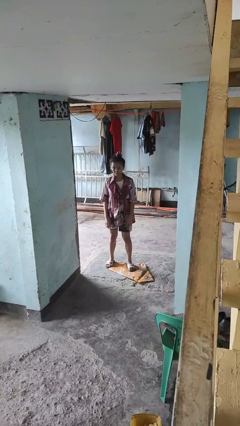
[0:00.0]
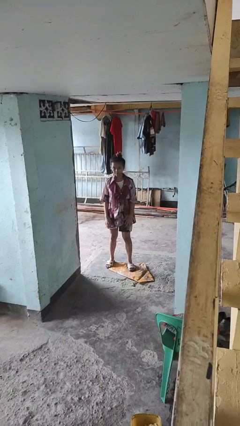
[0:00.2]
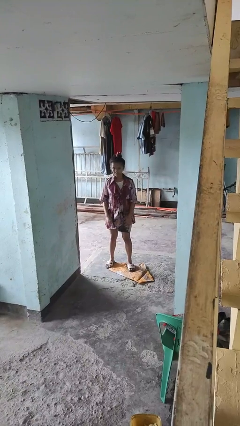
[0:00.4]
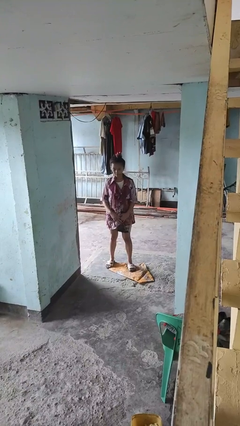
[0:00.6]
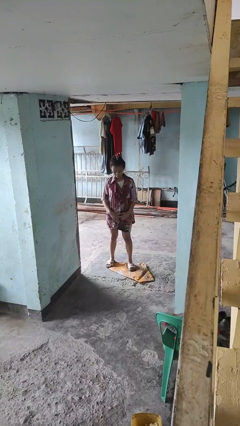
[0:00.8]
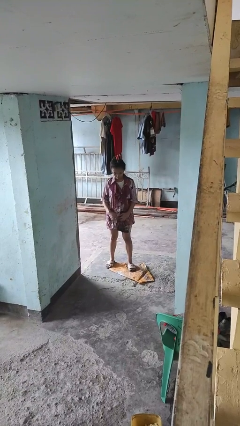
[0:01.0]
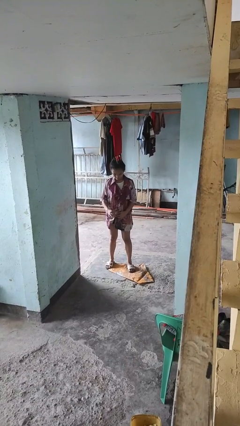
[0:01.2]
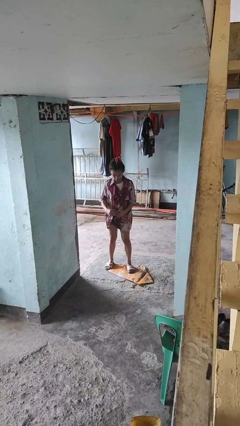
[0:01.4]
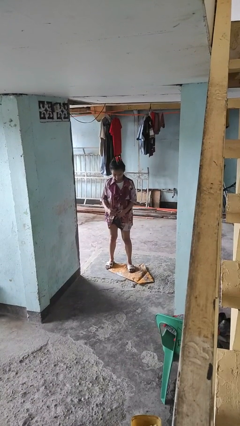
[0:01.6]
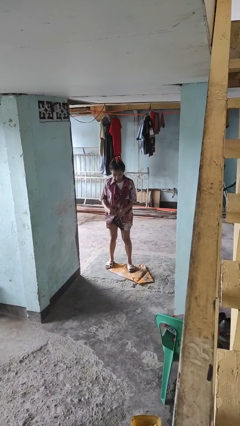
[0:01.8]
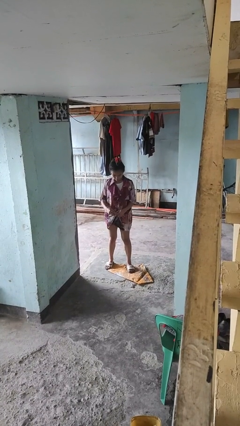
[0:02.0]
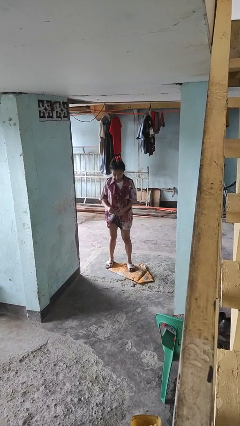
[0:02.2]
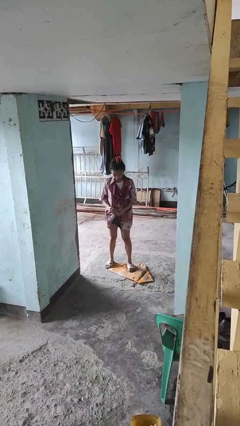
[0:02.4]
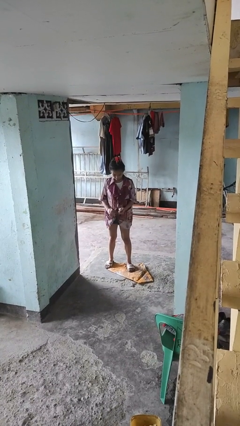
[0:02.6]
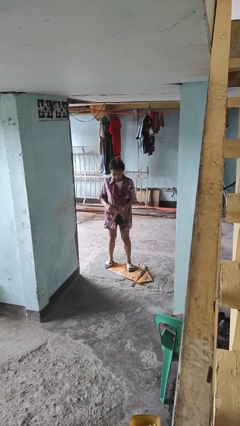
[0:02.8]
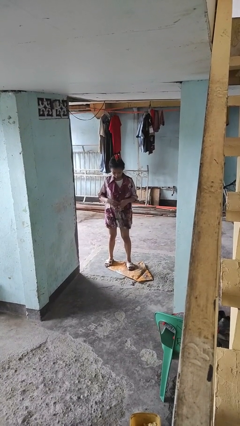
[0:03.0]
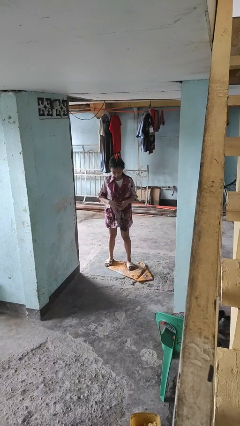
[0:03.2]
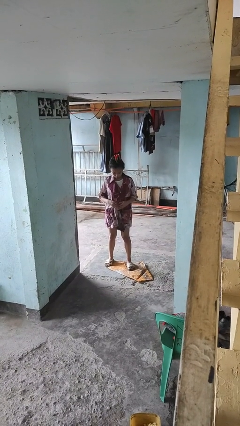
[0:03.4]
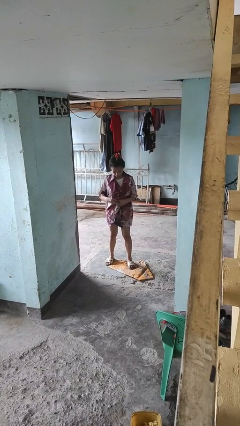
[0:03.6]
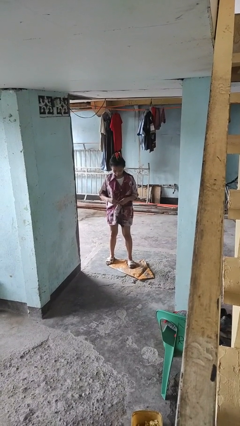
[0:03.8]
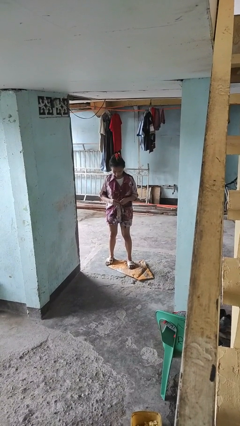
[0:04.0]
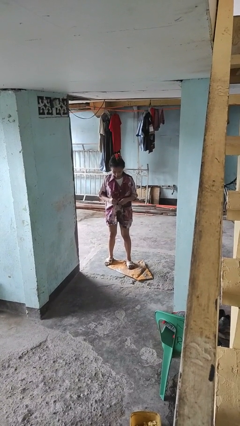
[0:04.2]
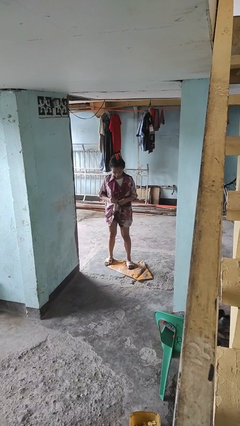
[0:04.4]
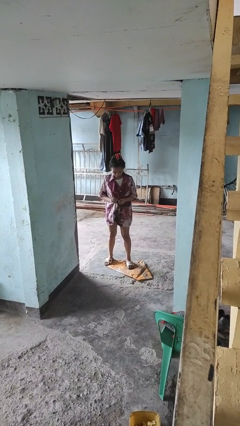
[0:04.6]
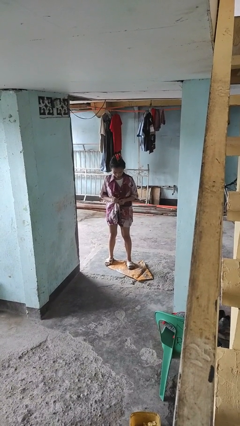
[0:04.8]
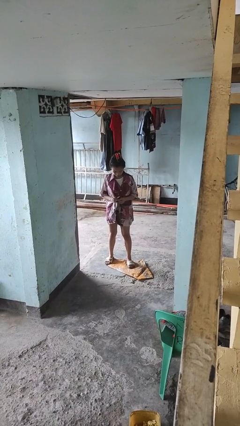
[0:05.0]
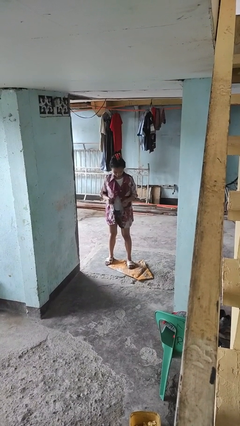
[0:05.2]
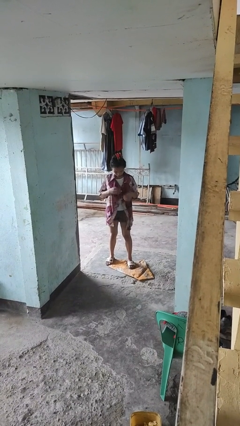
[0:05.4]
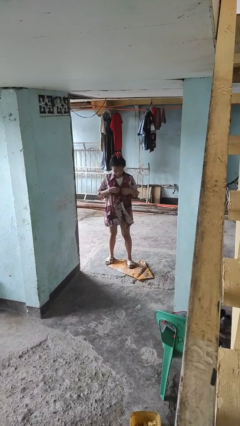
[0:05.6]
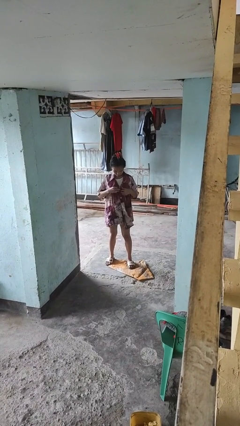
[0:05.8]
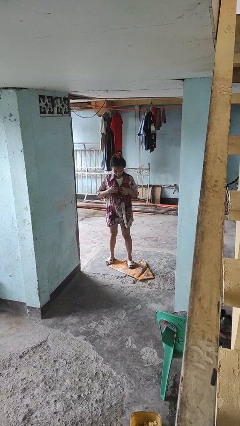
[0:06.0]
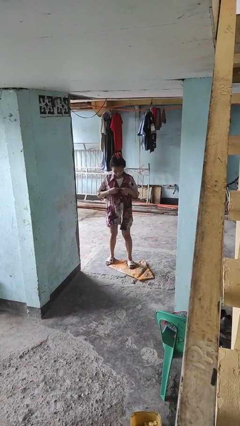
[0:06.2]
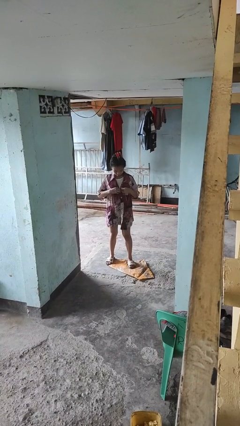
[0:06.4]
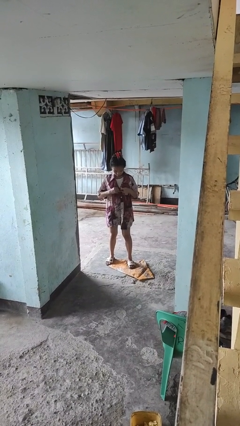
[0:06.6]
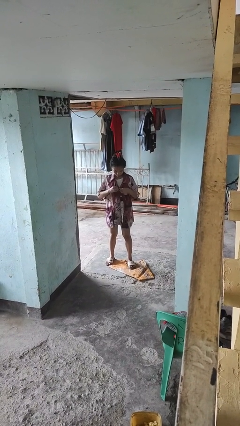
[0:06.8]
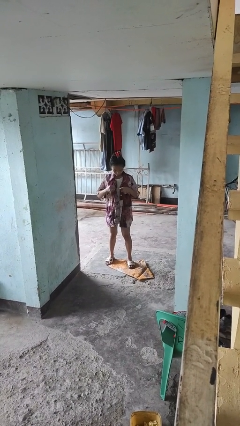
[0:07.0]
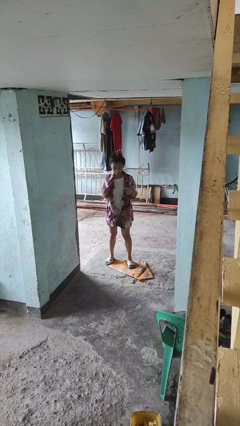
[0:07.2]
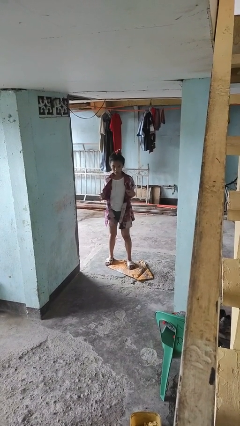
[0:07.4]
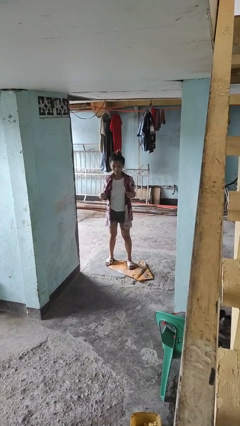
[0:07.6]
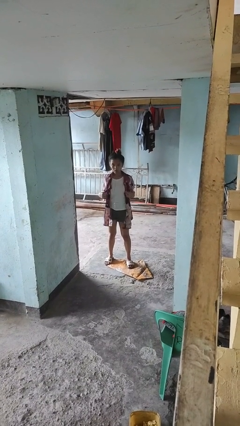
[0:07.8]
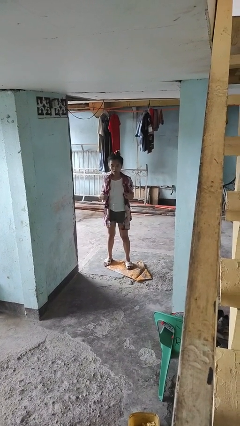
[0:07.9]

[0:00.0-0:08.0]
person unbuttons shirt

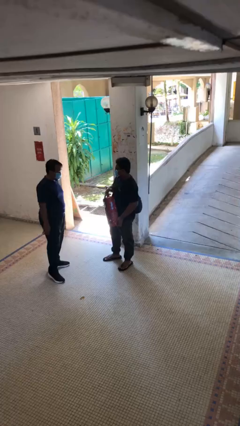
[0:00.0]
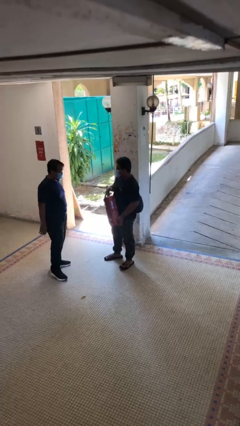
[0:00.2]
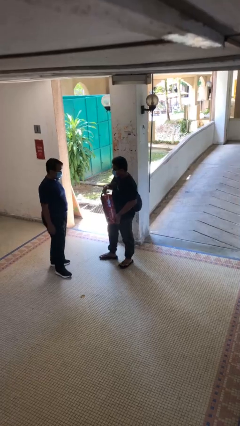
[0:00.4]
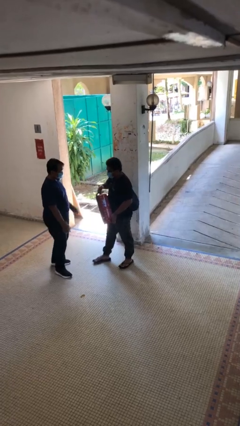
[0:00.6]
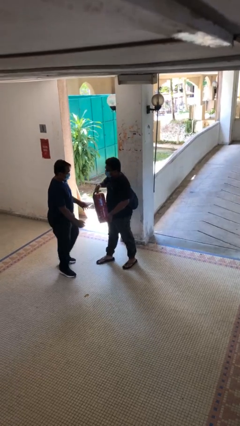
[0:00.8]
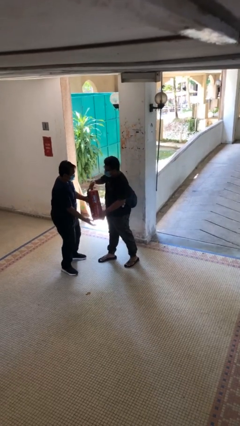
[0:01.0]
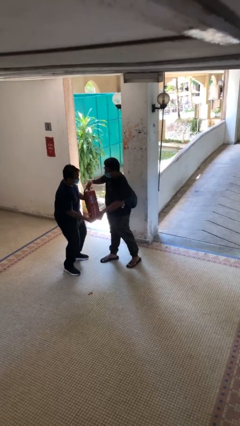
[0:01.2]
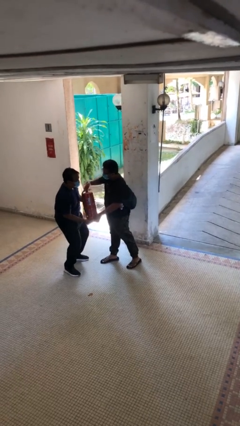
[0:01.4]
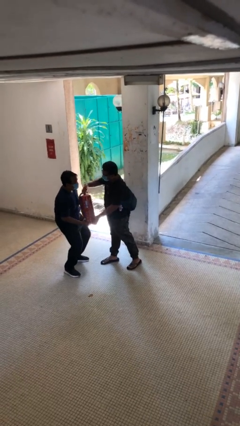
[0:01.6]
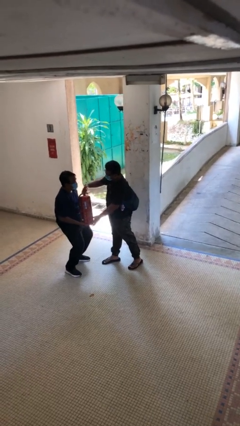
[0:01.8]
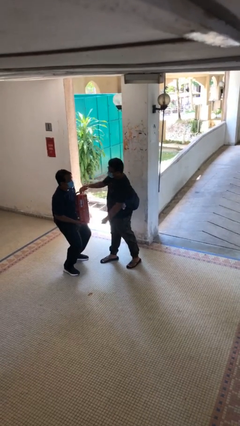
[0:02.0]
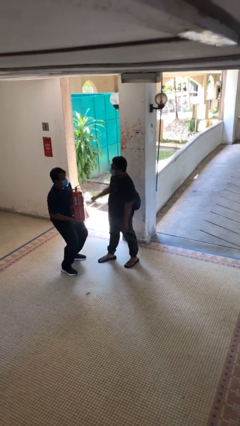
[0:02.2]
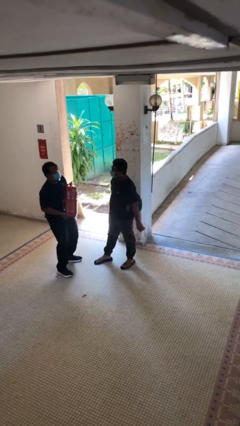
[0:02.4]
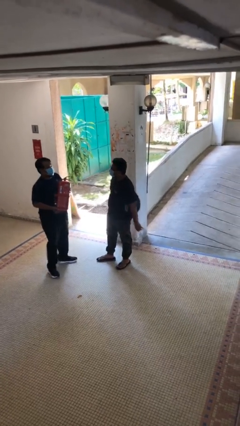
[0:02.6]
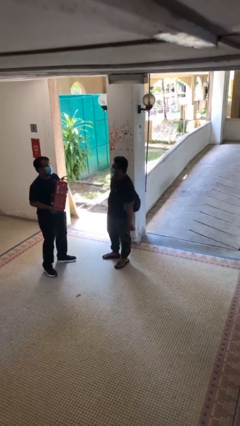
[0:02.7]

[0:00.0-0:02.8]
person transfers object to person

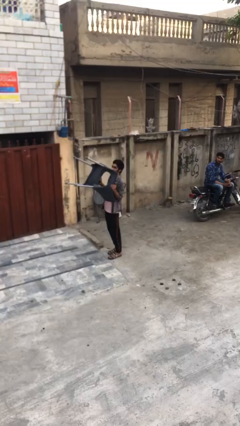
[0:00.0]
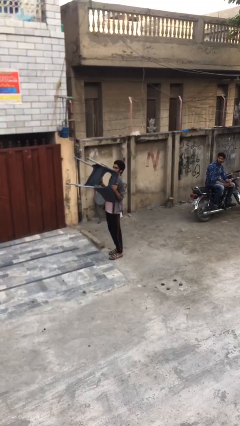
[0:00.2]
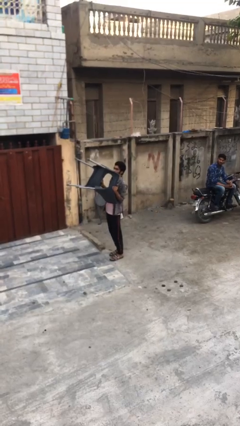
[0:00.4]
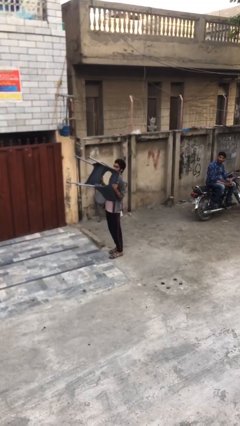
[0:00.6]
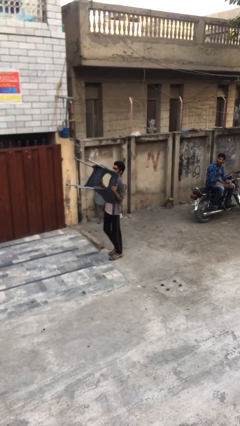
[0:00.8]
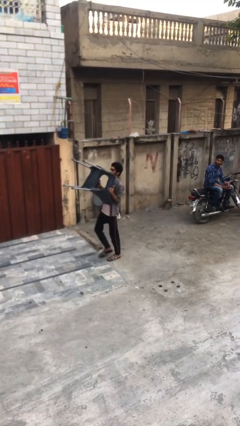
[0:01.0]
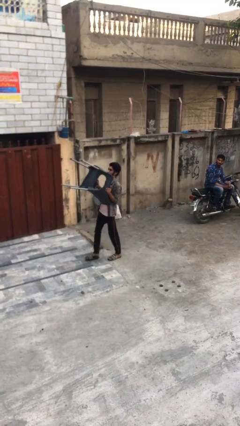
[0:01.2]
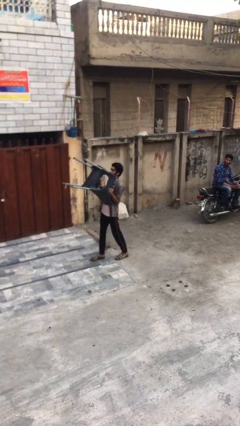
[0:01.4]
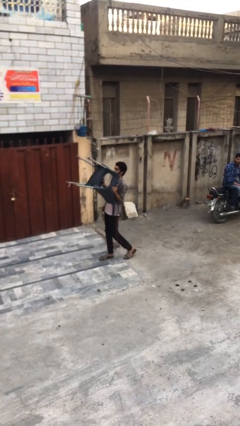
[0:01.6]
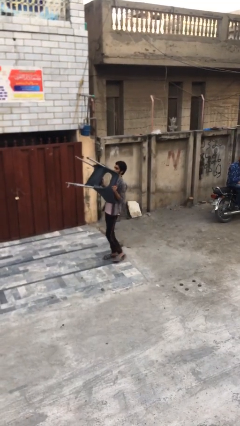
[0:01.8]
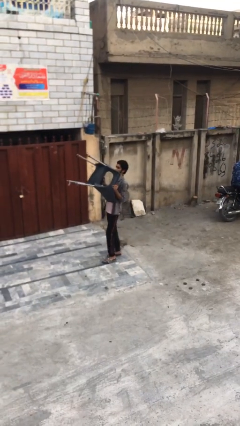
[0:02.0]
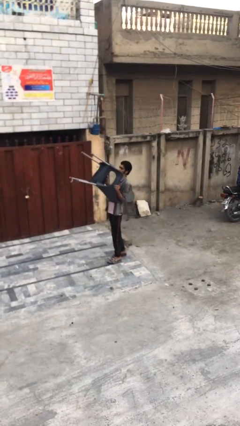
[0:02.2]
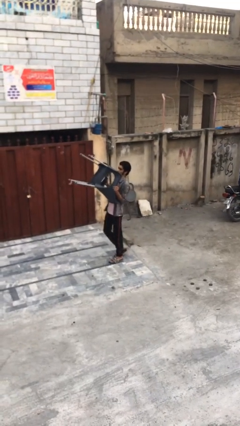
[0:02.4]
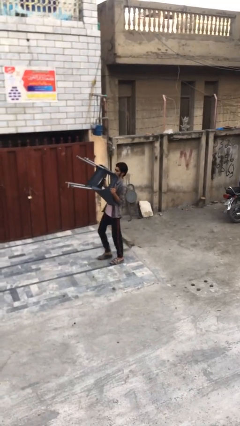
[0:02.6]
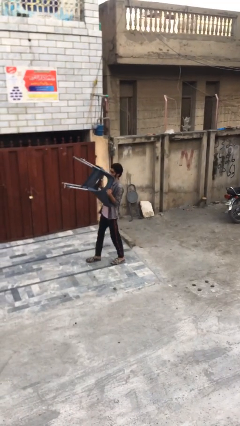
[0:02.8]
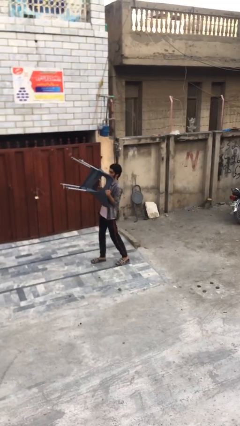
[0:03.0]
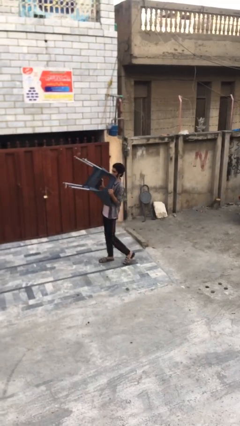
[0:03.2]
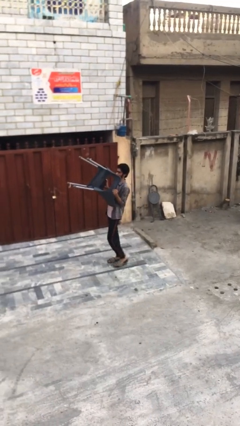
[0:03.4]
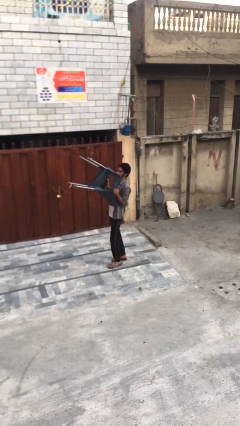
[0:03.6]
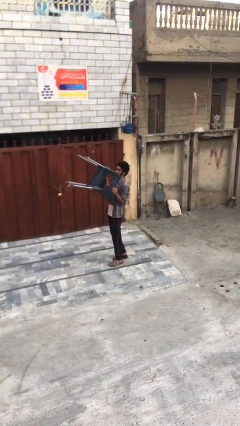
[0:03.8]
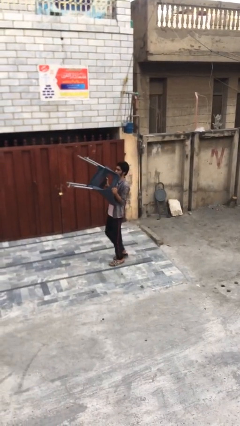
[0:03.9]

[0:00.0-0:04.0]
person carries heavy object

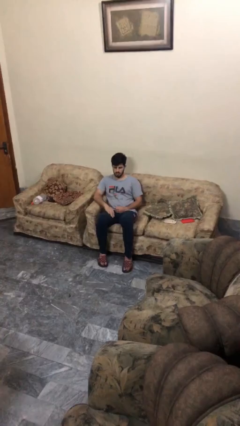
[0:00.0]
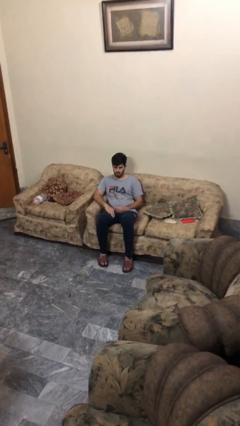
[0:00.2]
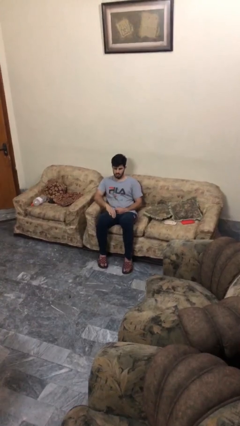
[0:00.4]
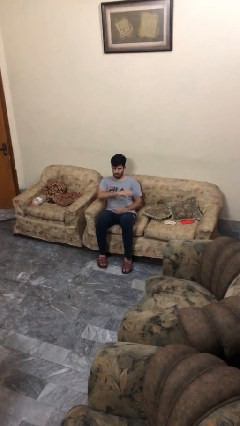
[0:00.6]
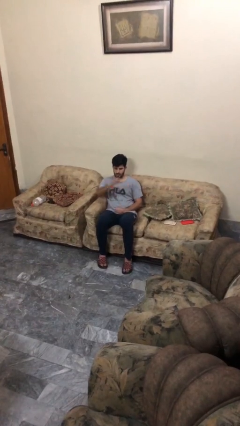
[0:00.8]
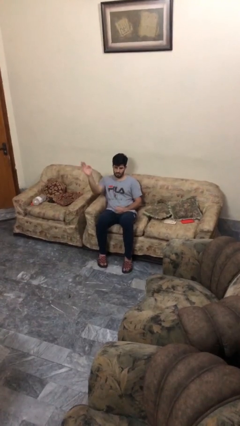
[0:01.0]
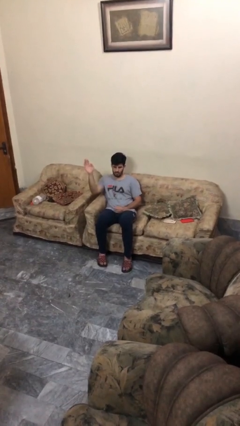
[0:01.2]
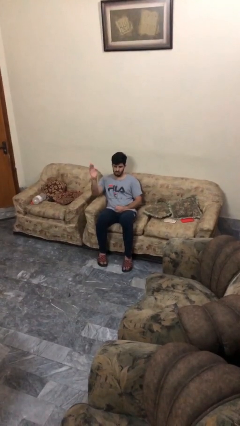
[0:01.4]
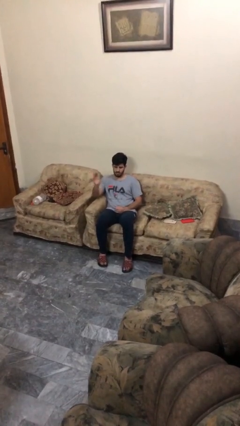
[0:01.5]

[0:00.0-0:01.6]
person gestures swipe right

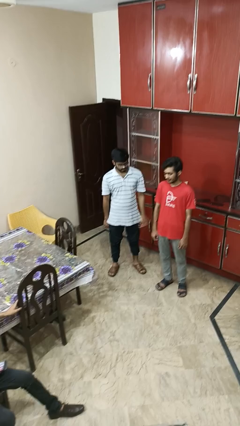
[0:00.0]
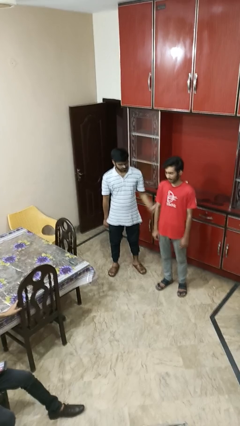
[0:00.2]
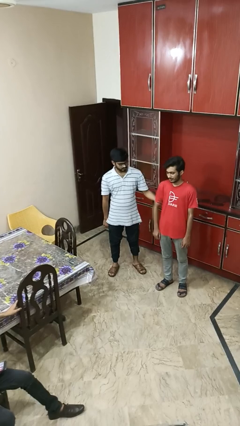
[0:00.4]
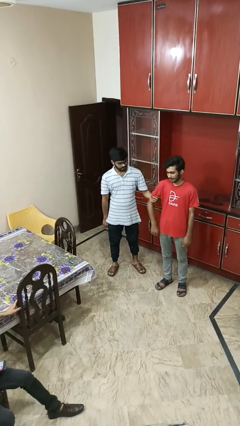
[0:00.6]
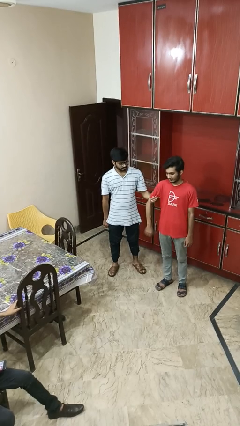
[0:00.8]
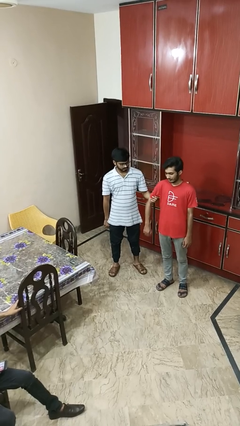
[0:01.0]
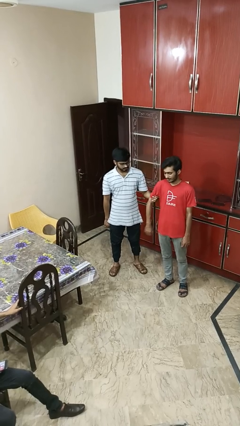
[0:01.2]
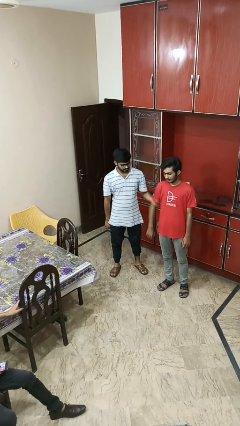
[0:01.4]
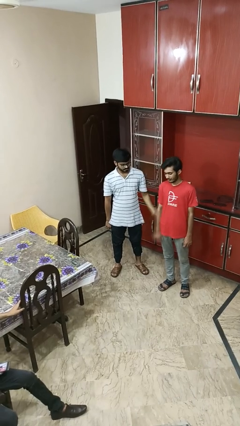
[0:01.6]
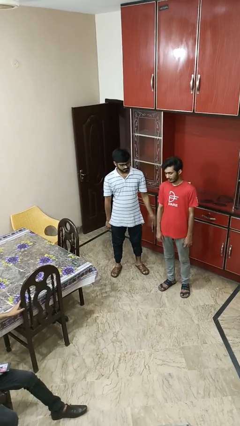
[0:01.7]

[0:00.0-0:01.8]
person grabs person by bicep
